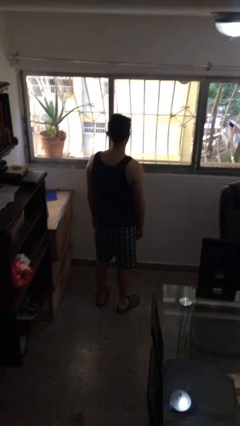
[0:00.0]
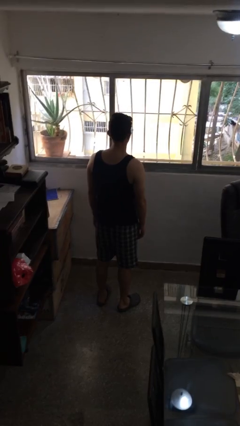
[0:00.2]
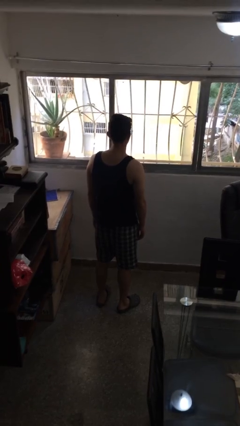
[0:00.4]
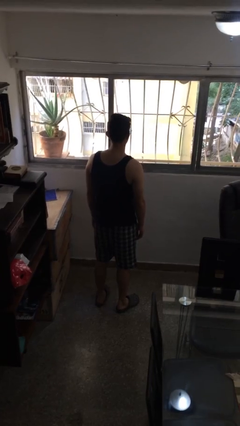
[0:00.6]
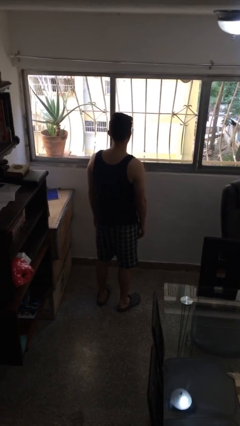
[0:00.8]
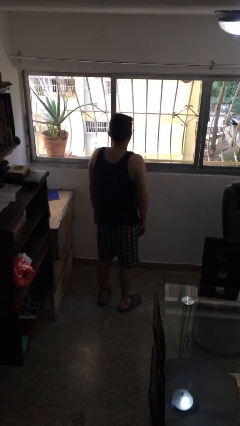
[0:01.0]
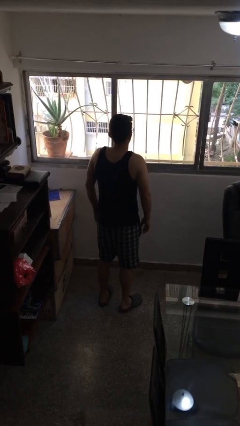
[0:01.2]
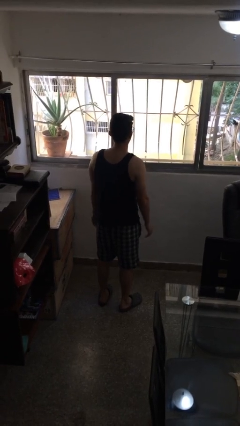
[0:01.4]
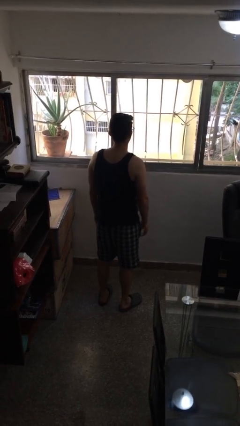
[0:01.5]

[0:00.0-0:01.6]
person shrugs

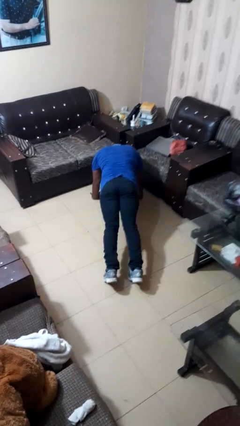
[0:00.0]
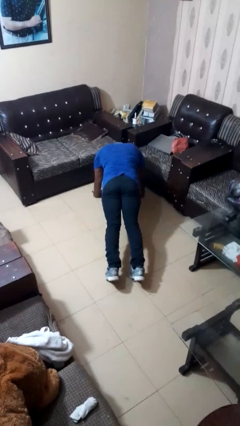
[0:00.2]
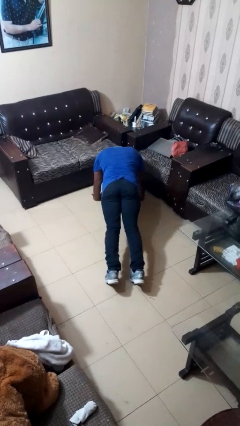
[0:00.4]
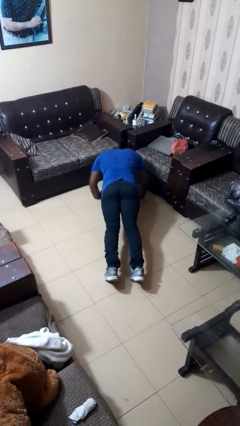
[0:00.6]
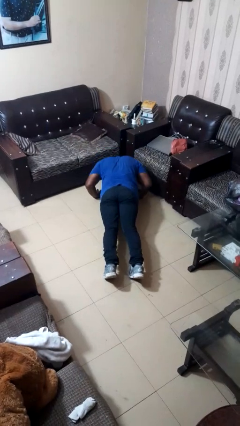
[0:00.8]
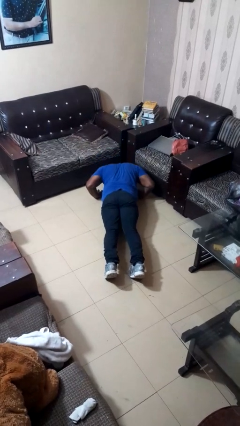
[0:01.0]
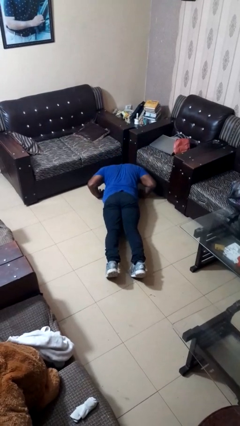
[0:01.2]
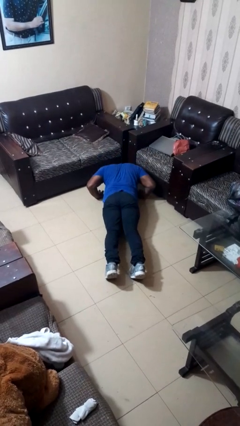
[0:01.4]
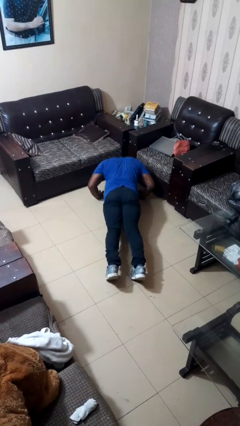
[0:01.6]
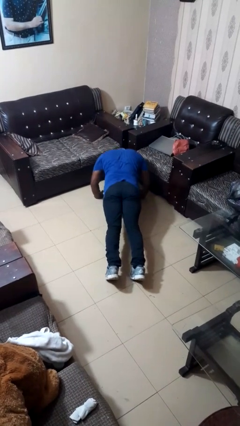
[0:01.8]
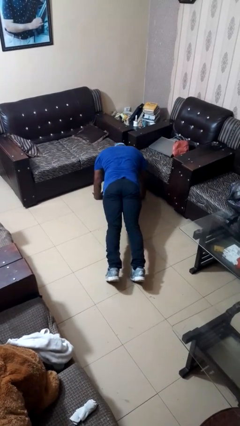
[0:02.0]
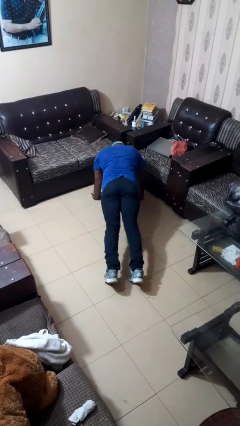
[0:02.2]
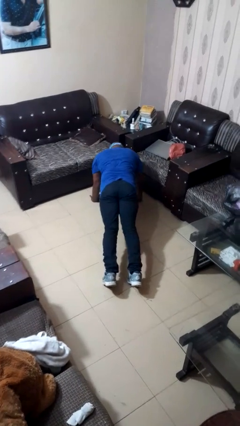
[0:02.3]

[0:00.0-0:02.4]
person exercises with pushup

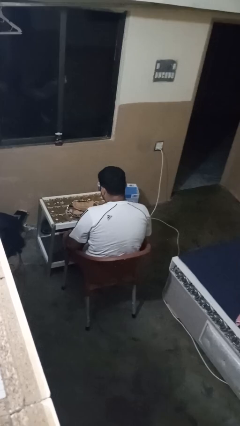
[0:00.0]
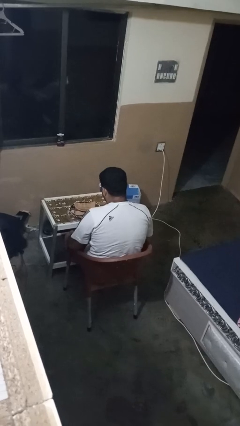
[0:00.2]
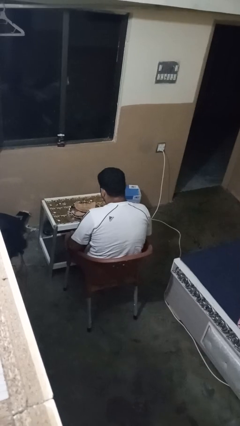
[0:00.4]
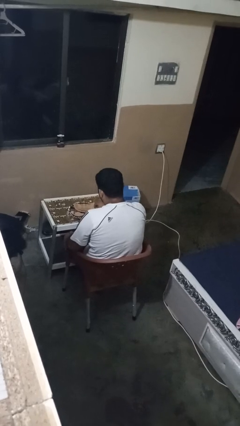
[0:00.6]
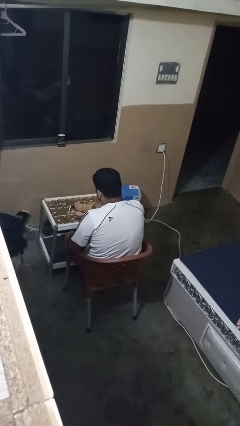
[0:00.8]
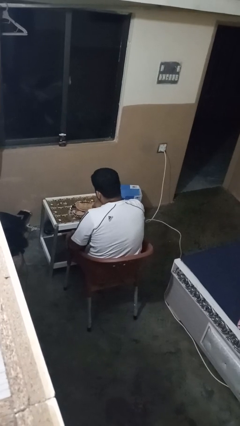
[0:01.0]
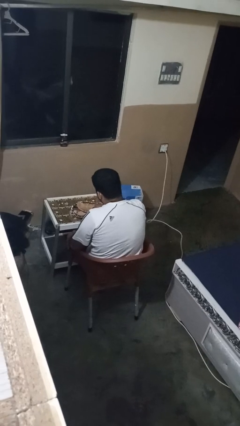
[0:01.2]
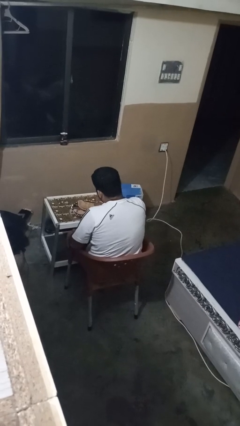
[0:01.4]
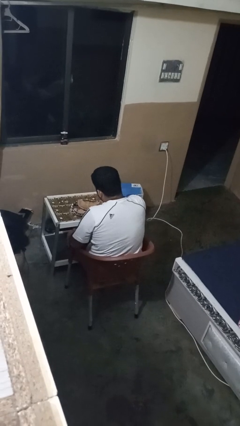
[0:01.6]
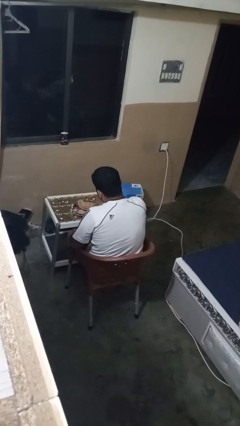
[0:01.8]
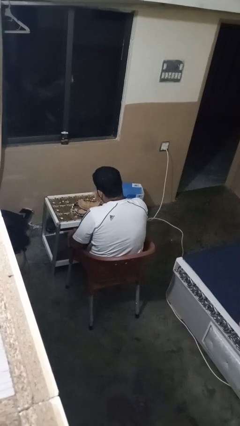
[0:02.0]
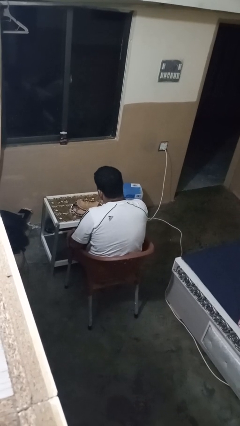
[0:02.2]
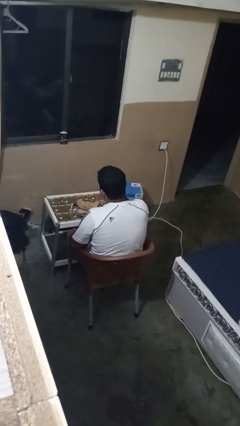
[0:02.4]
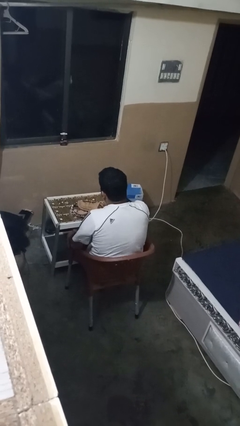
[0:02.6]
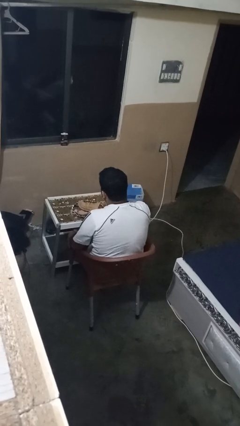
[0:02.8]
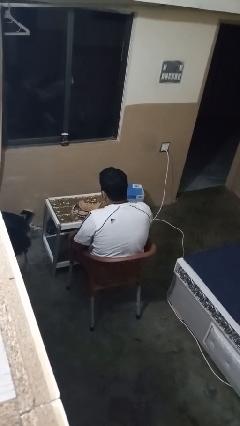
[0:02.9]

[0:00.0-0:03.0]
person eats with hands

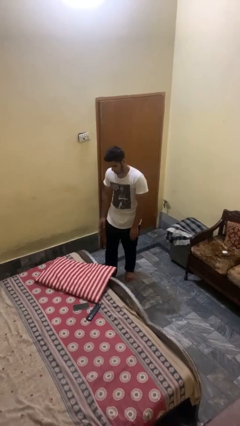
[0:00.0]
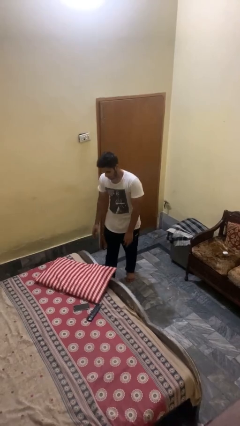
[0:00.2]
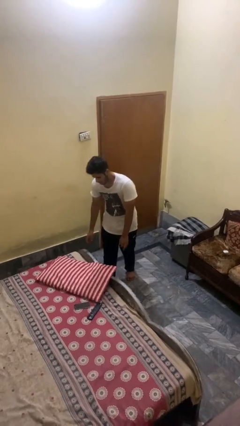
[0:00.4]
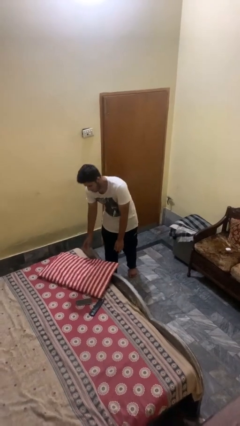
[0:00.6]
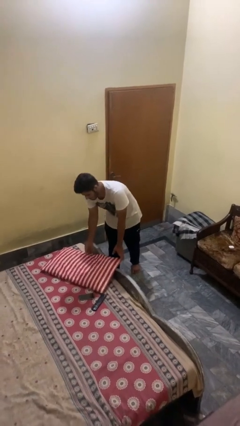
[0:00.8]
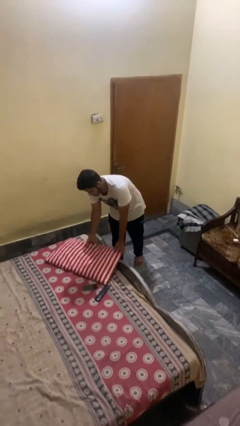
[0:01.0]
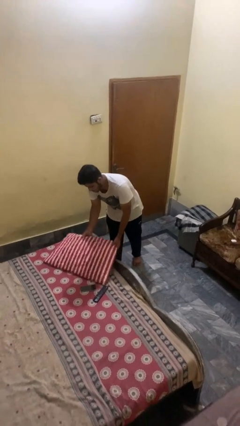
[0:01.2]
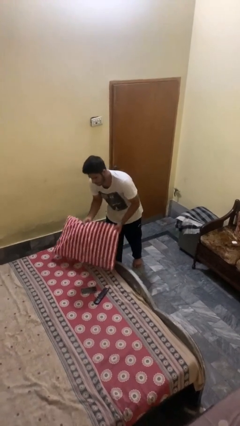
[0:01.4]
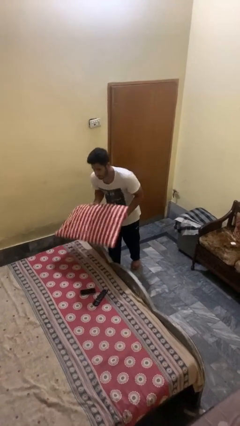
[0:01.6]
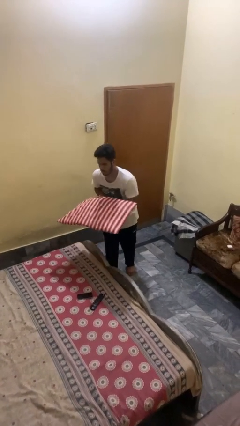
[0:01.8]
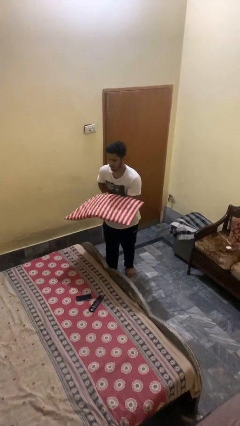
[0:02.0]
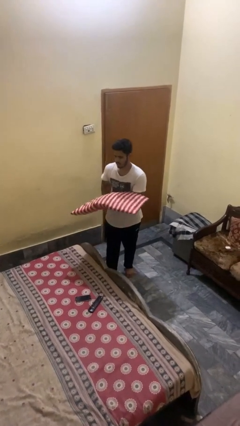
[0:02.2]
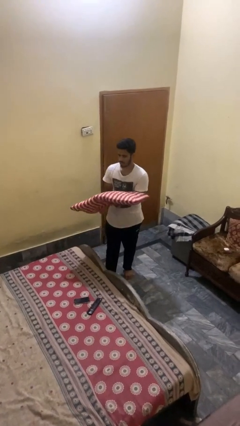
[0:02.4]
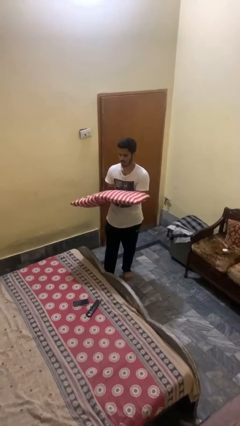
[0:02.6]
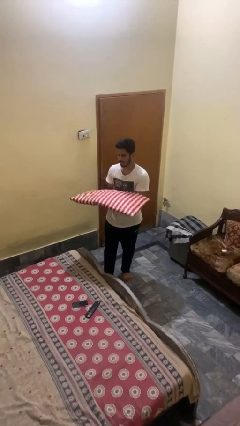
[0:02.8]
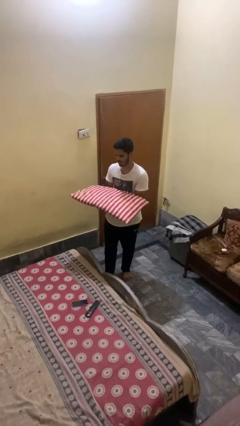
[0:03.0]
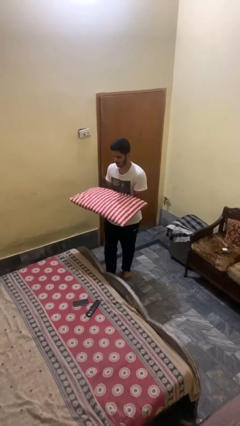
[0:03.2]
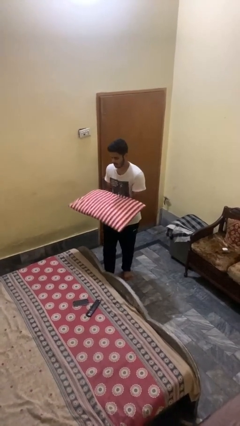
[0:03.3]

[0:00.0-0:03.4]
person picks up object from bed

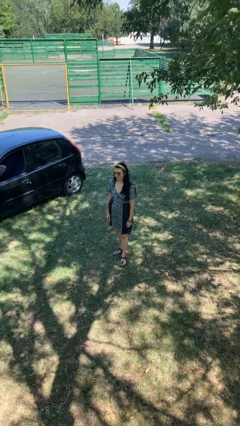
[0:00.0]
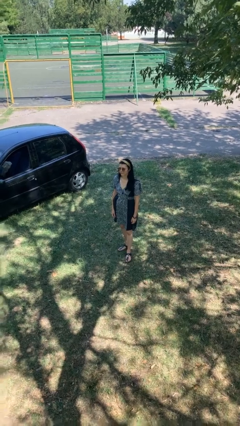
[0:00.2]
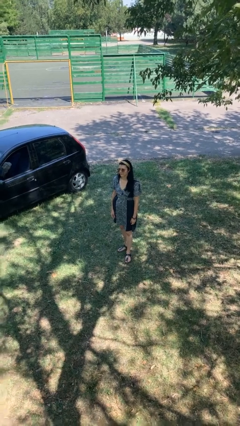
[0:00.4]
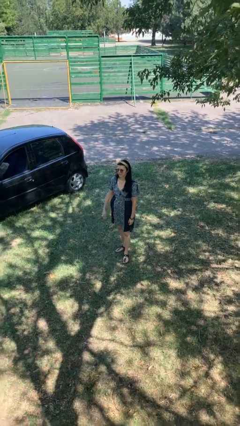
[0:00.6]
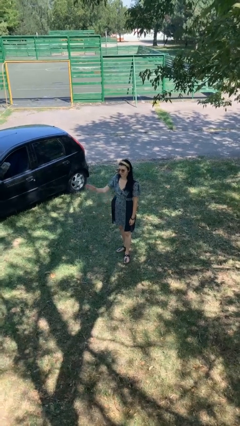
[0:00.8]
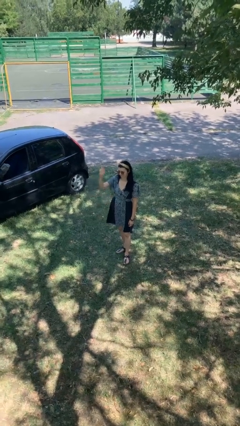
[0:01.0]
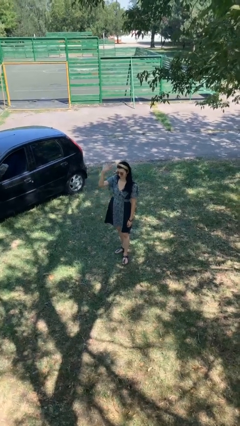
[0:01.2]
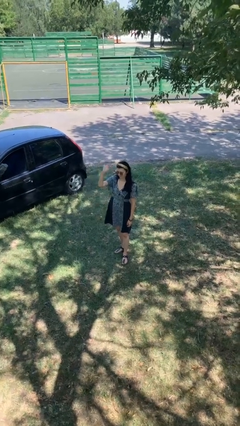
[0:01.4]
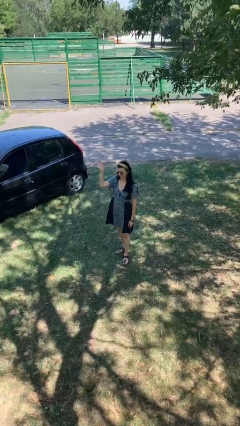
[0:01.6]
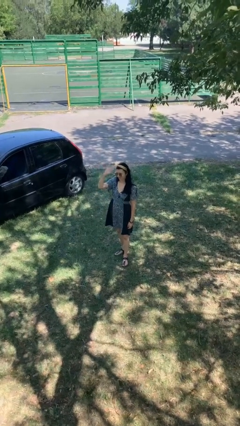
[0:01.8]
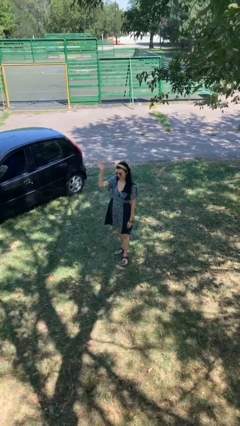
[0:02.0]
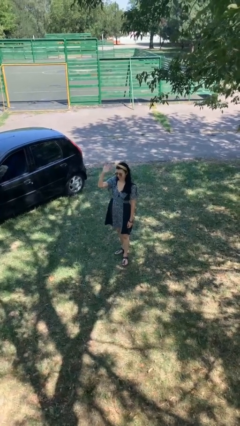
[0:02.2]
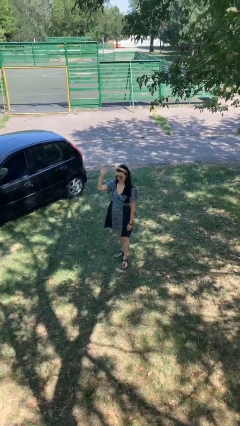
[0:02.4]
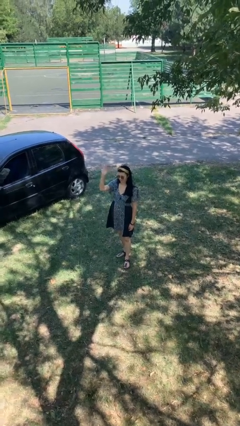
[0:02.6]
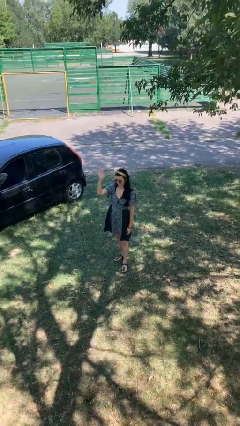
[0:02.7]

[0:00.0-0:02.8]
person waves at person

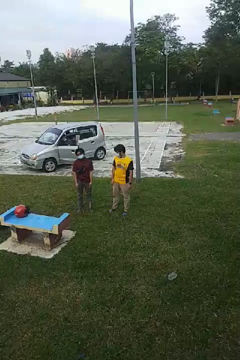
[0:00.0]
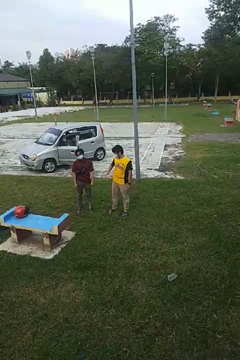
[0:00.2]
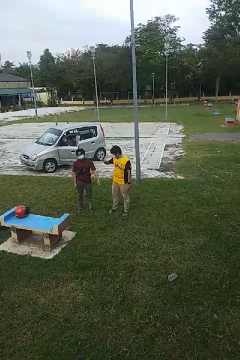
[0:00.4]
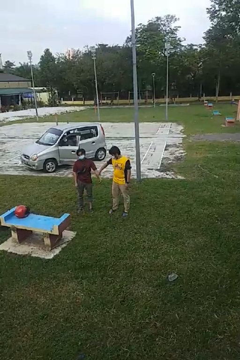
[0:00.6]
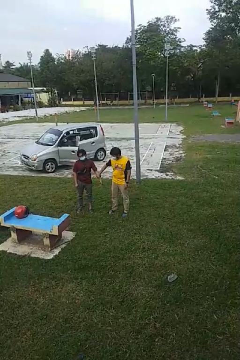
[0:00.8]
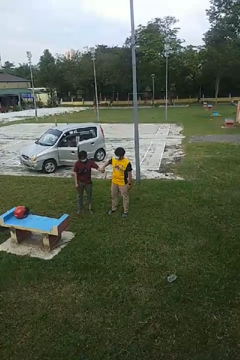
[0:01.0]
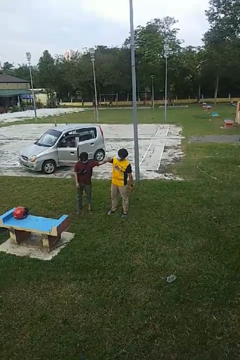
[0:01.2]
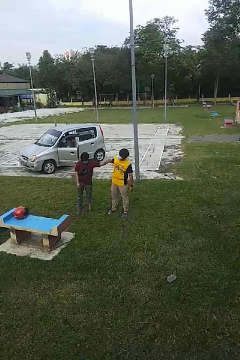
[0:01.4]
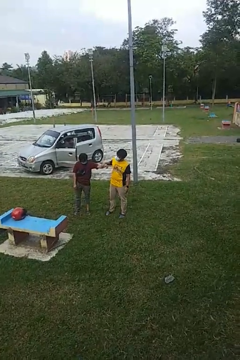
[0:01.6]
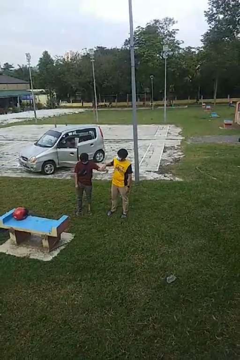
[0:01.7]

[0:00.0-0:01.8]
person grabs person by forearm

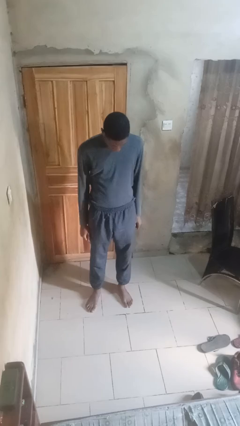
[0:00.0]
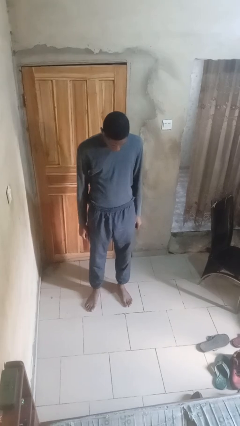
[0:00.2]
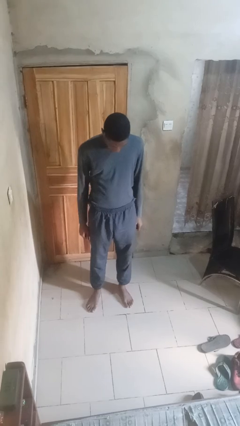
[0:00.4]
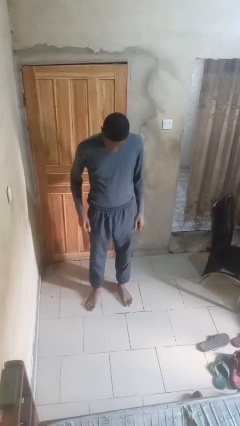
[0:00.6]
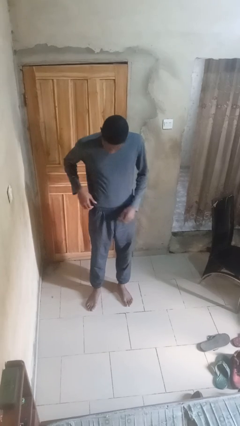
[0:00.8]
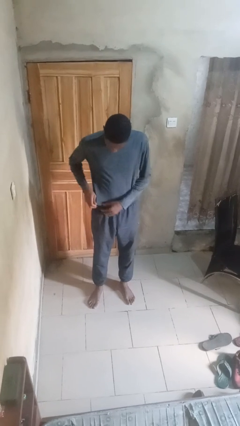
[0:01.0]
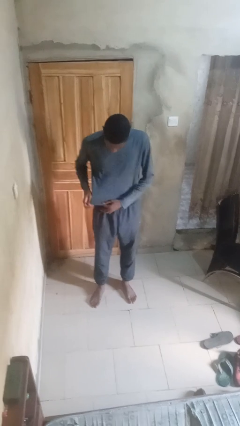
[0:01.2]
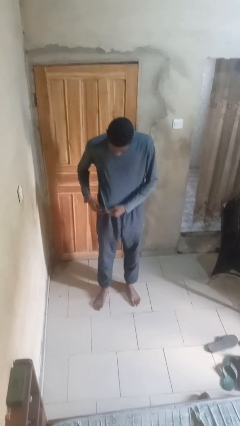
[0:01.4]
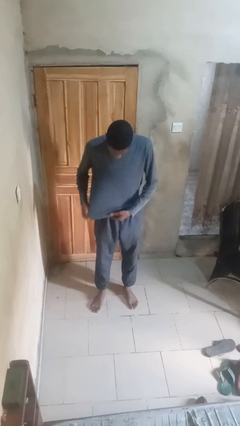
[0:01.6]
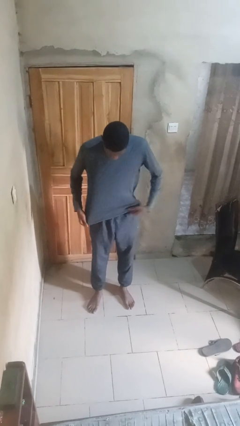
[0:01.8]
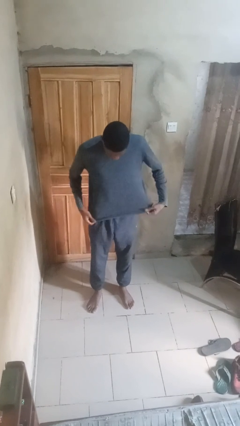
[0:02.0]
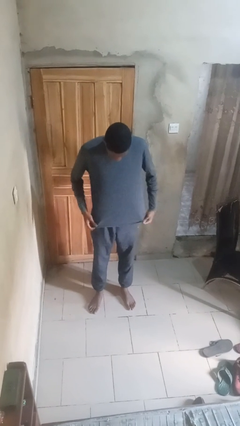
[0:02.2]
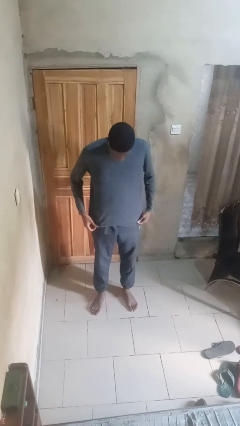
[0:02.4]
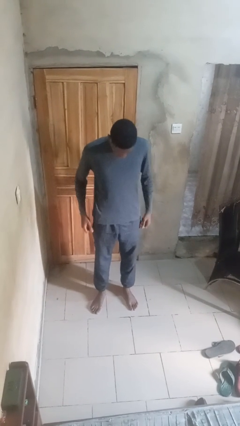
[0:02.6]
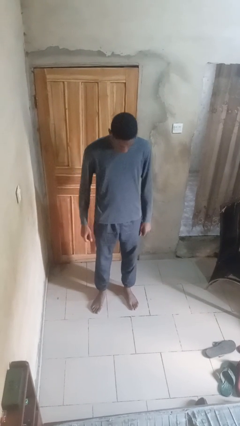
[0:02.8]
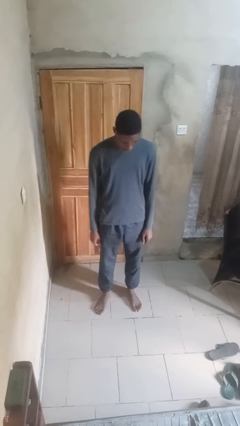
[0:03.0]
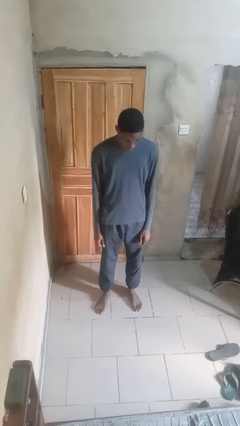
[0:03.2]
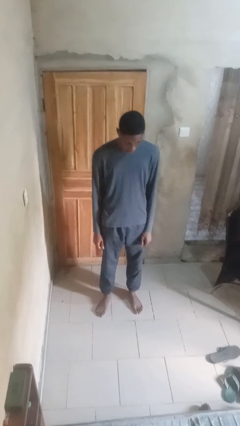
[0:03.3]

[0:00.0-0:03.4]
person untucks shirt
